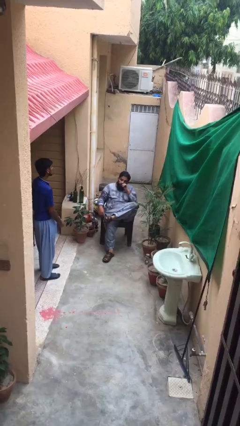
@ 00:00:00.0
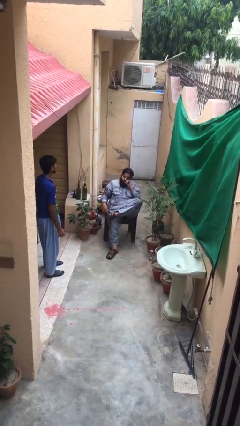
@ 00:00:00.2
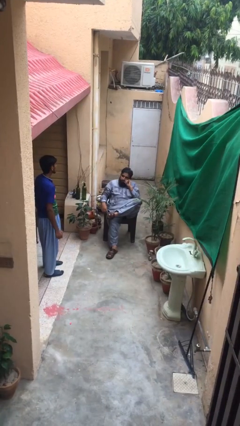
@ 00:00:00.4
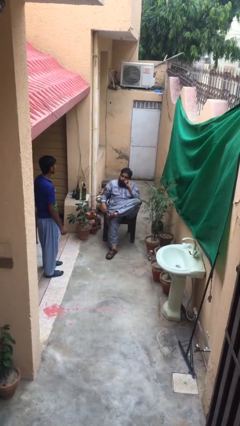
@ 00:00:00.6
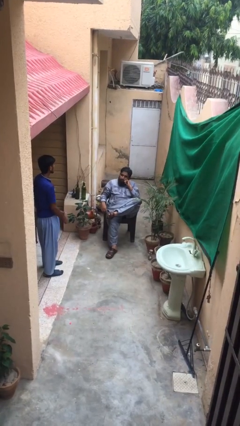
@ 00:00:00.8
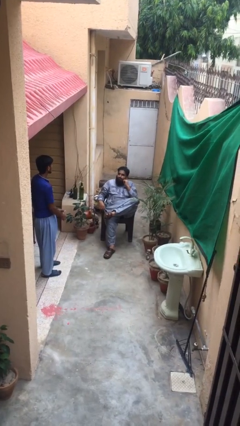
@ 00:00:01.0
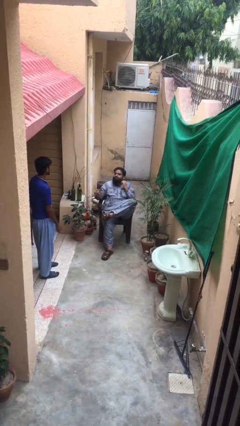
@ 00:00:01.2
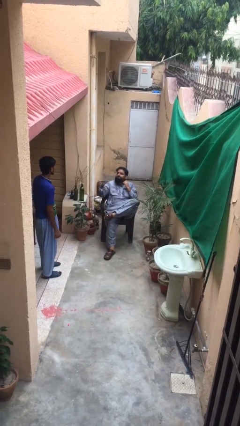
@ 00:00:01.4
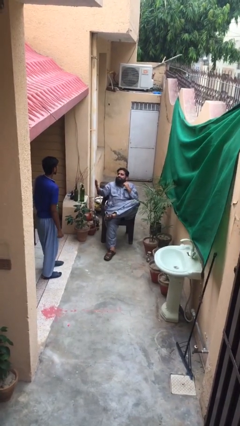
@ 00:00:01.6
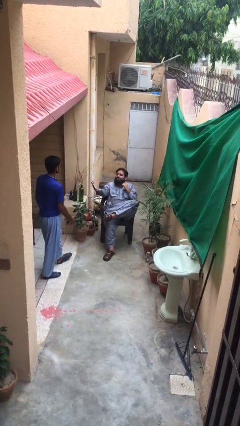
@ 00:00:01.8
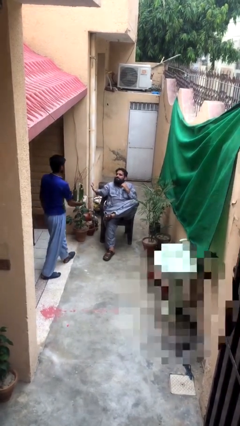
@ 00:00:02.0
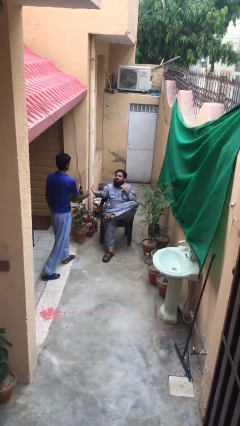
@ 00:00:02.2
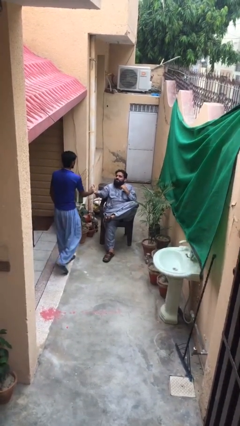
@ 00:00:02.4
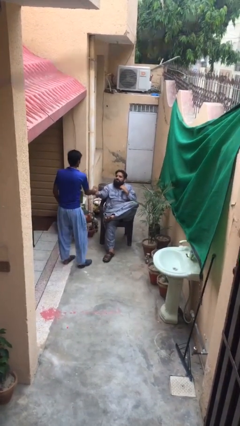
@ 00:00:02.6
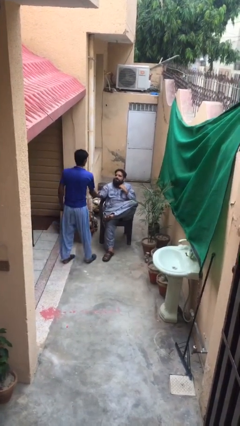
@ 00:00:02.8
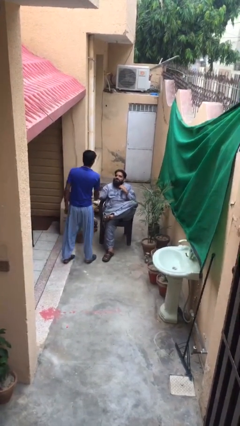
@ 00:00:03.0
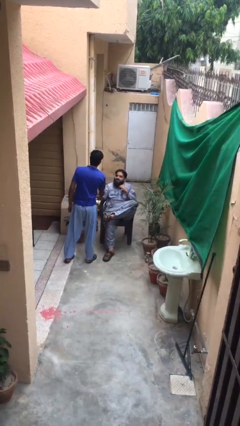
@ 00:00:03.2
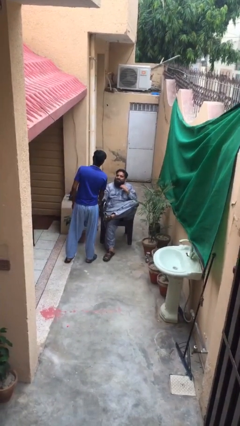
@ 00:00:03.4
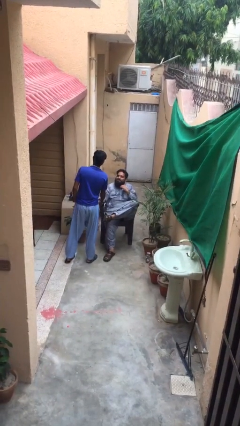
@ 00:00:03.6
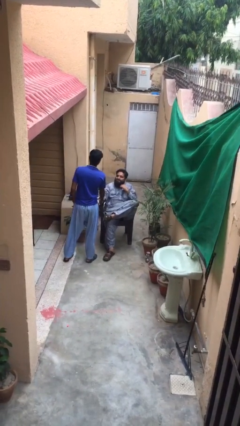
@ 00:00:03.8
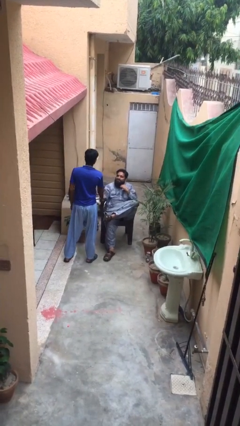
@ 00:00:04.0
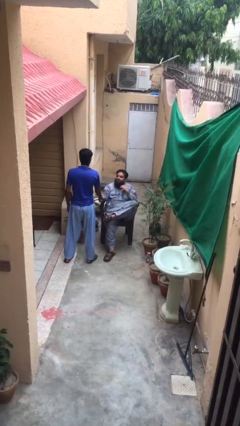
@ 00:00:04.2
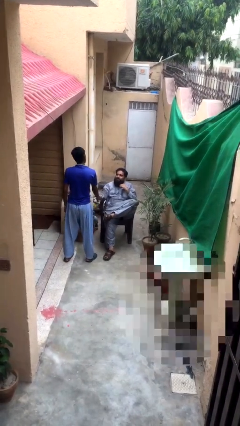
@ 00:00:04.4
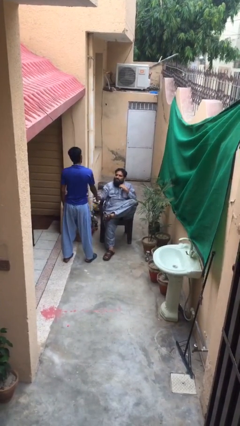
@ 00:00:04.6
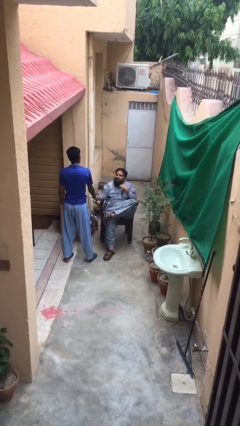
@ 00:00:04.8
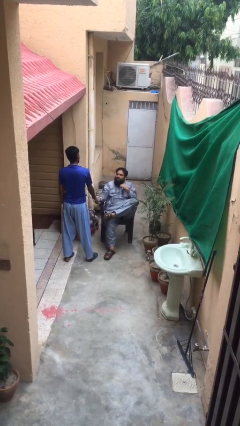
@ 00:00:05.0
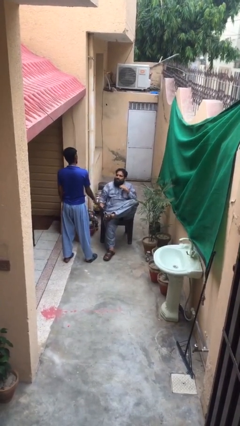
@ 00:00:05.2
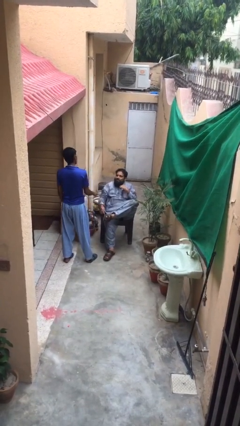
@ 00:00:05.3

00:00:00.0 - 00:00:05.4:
person shakes hand

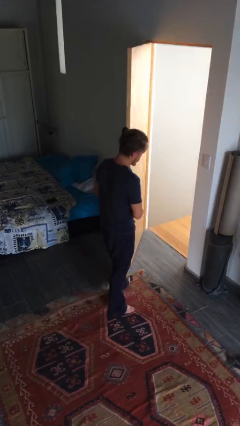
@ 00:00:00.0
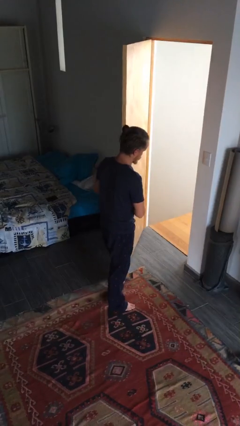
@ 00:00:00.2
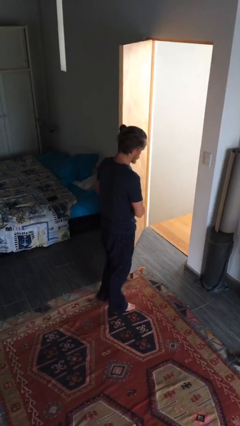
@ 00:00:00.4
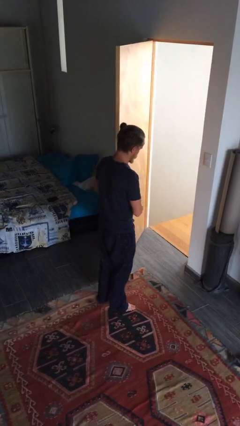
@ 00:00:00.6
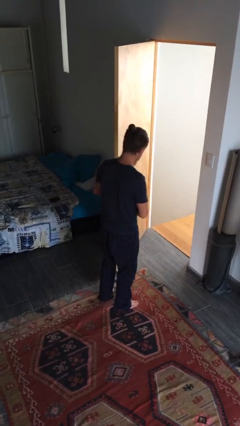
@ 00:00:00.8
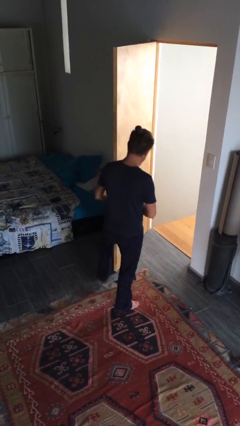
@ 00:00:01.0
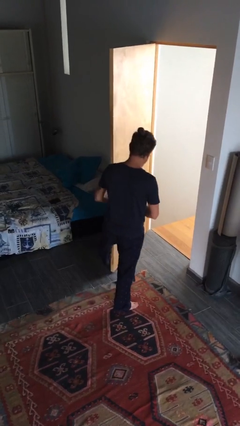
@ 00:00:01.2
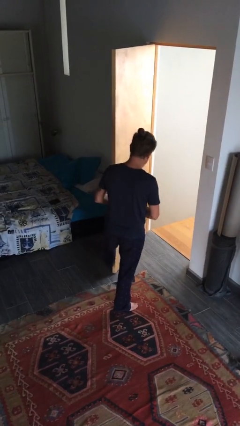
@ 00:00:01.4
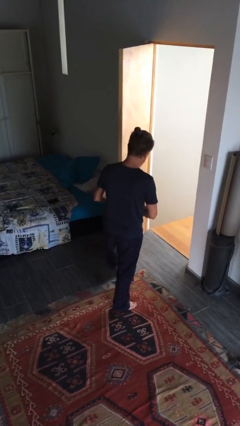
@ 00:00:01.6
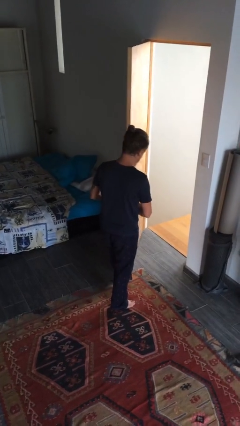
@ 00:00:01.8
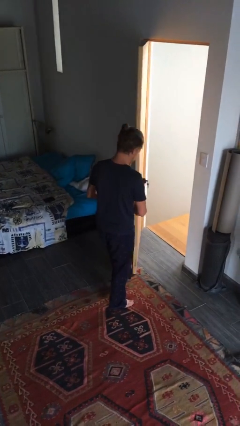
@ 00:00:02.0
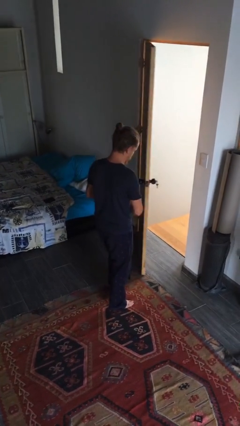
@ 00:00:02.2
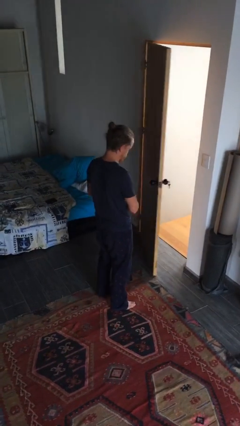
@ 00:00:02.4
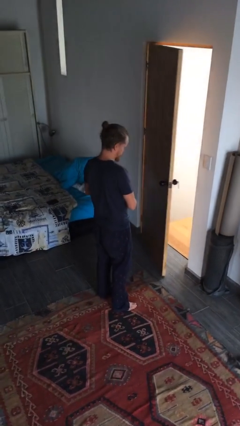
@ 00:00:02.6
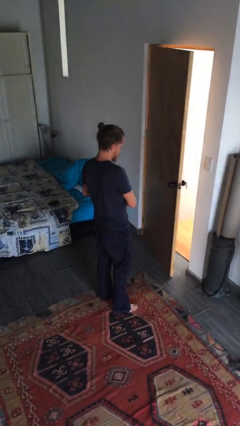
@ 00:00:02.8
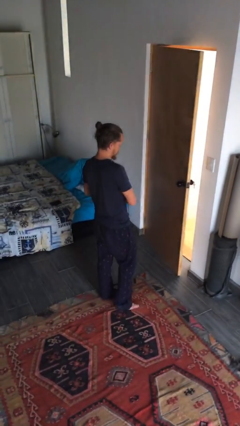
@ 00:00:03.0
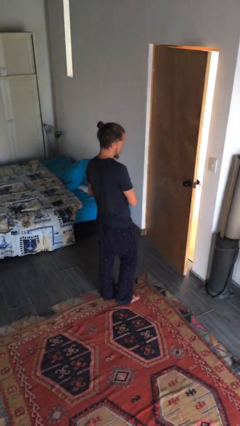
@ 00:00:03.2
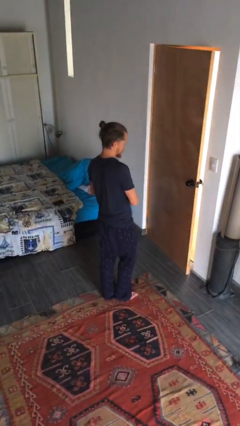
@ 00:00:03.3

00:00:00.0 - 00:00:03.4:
person closes door with foot

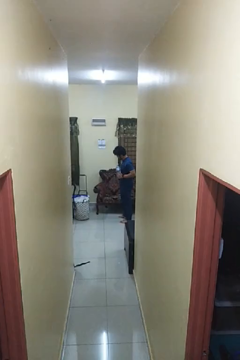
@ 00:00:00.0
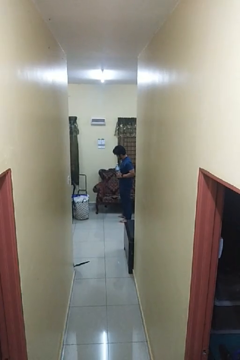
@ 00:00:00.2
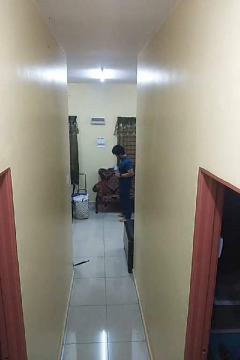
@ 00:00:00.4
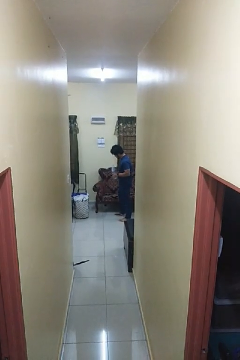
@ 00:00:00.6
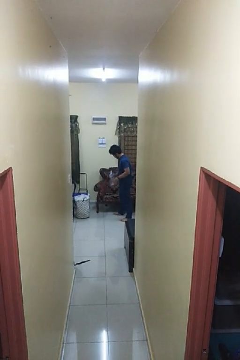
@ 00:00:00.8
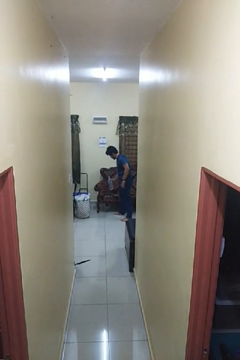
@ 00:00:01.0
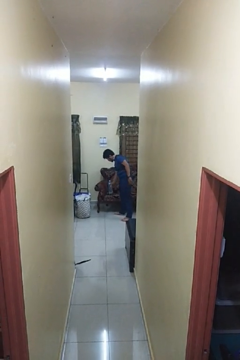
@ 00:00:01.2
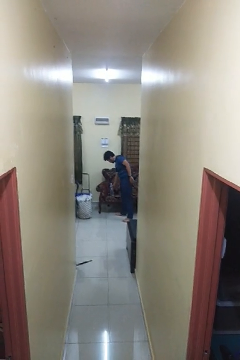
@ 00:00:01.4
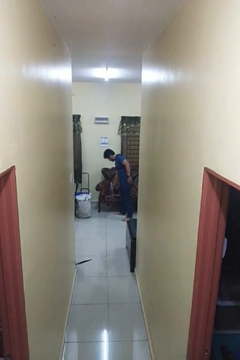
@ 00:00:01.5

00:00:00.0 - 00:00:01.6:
person puts down object on couch

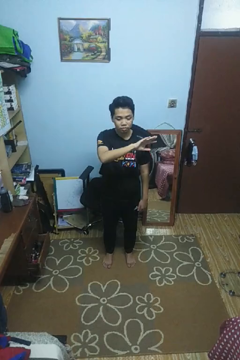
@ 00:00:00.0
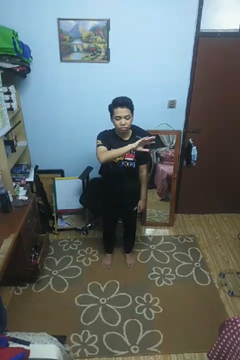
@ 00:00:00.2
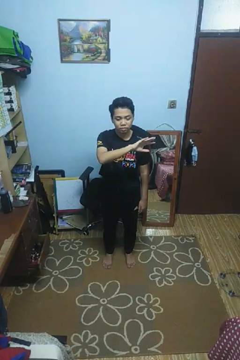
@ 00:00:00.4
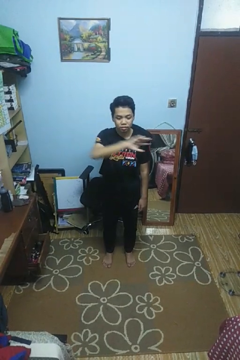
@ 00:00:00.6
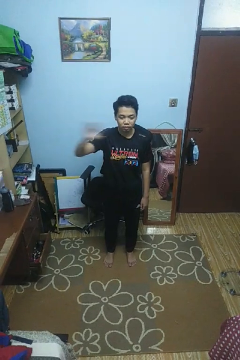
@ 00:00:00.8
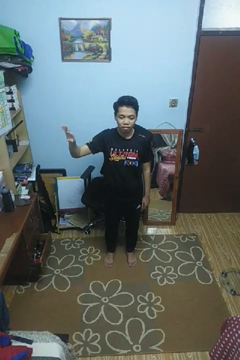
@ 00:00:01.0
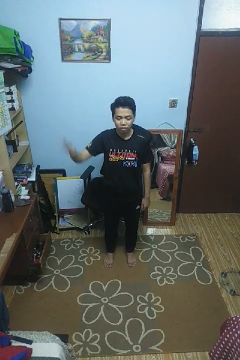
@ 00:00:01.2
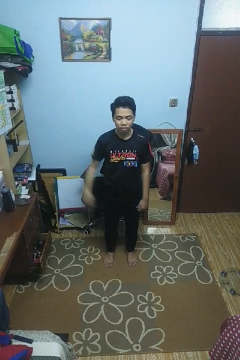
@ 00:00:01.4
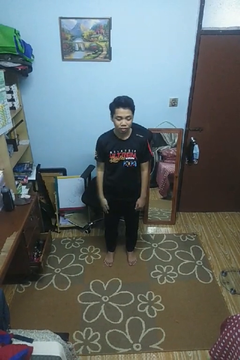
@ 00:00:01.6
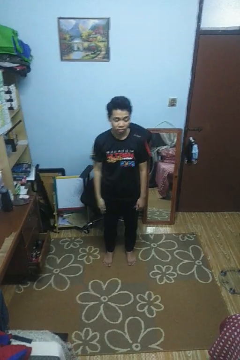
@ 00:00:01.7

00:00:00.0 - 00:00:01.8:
person gestures swipe right

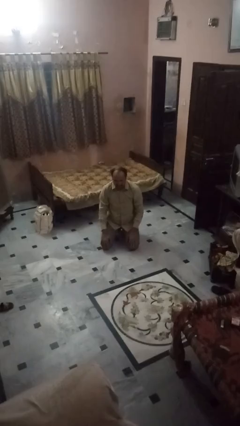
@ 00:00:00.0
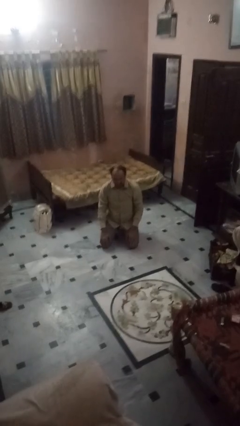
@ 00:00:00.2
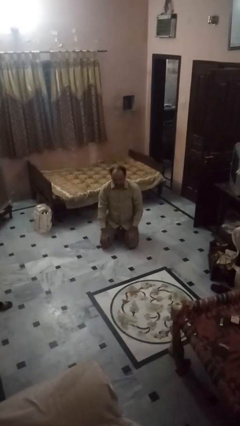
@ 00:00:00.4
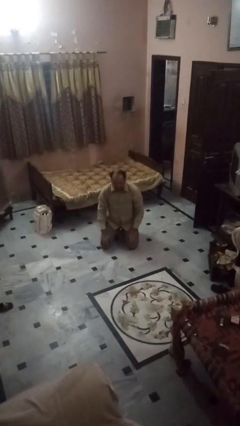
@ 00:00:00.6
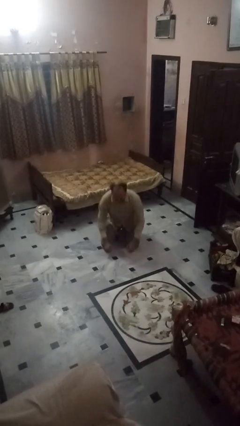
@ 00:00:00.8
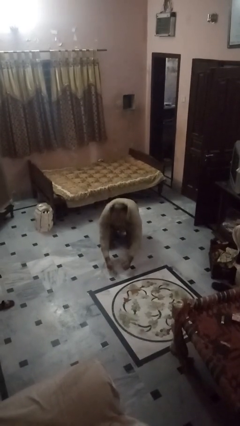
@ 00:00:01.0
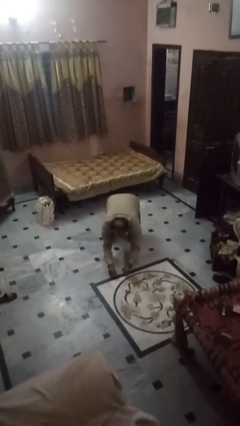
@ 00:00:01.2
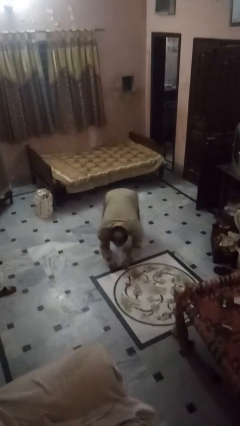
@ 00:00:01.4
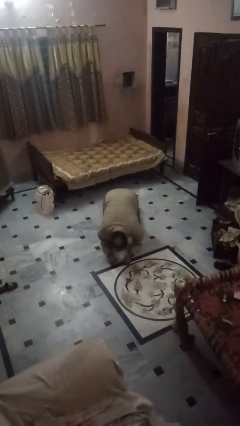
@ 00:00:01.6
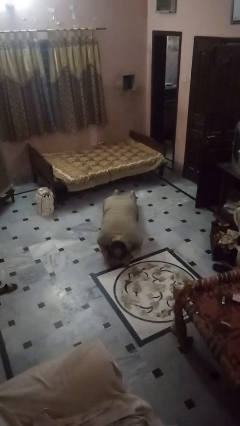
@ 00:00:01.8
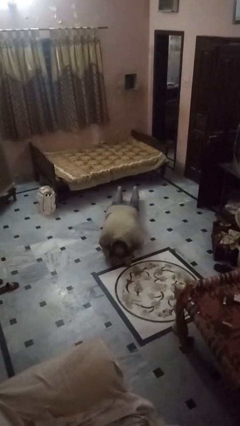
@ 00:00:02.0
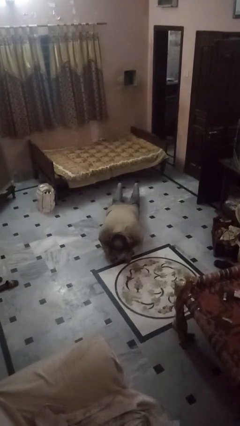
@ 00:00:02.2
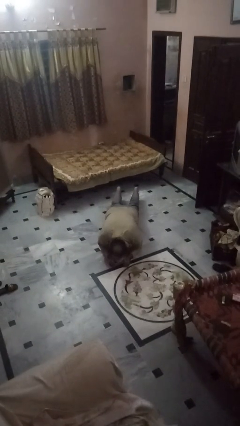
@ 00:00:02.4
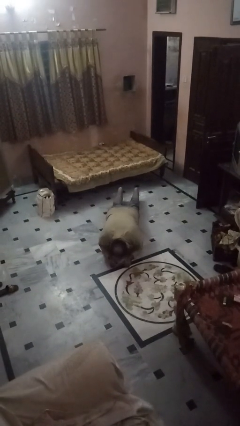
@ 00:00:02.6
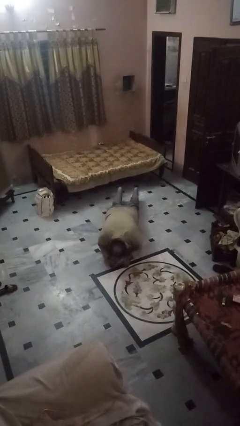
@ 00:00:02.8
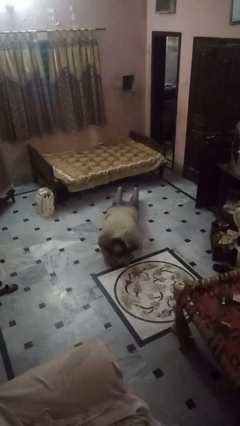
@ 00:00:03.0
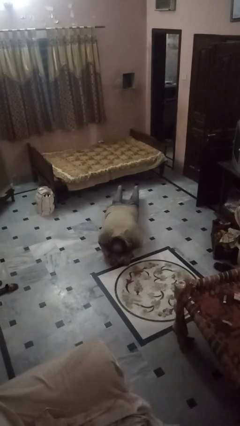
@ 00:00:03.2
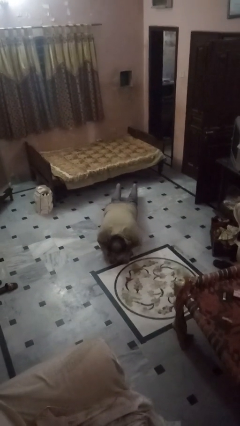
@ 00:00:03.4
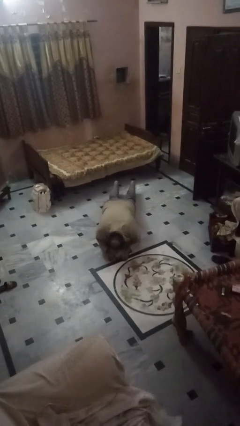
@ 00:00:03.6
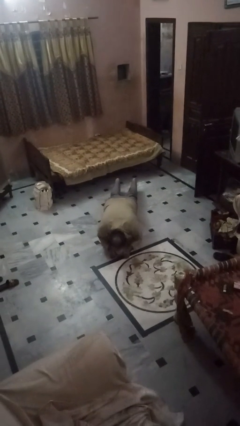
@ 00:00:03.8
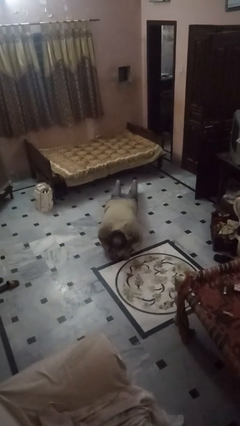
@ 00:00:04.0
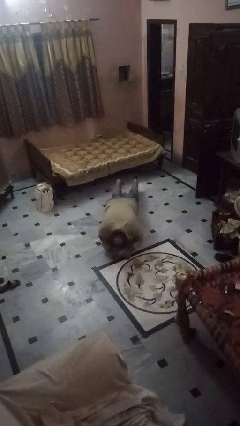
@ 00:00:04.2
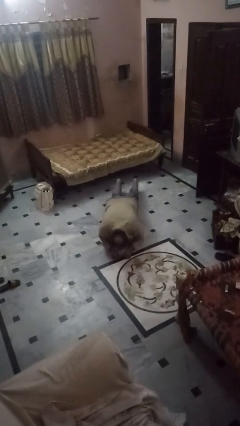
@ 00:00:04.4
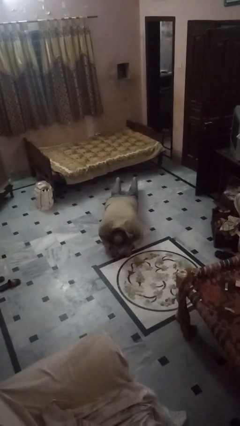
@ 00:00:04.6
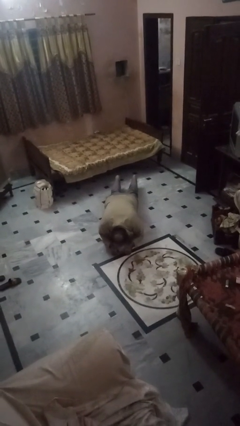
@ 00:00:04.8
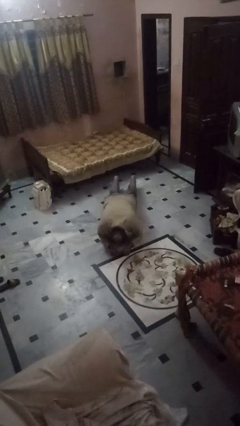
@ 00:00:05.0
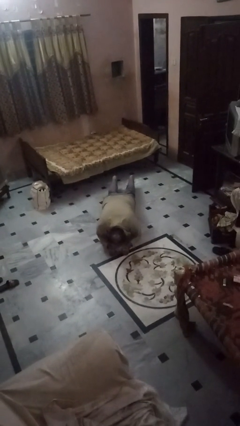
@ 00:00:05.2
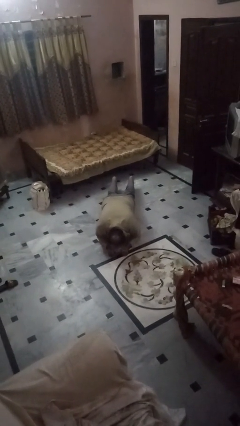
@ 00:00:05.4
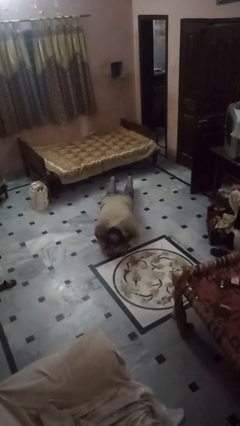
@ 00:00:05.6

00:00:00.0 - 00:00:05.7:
person exercises with plank
